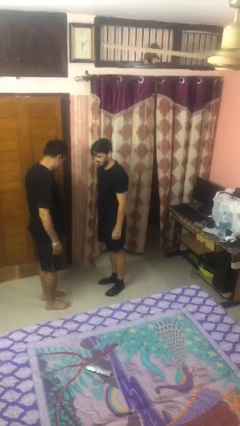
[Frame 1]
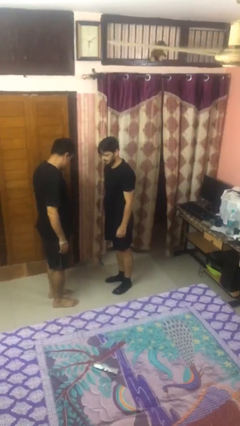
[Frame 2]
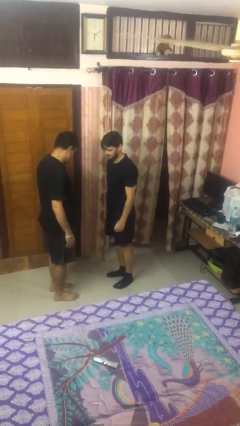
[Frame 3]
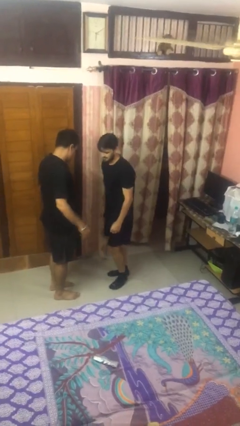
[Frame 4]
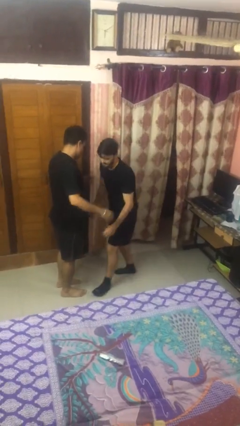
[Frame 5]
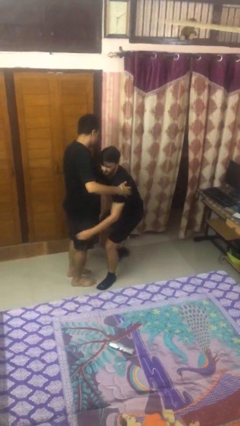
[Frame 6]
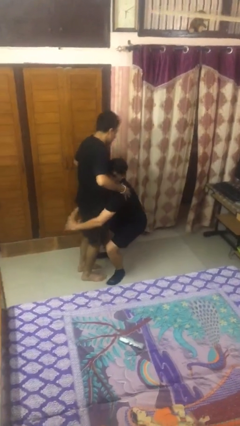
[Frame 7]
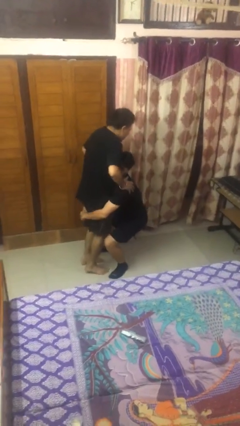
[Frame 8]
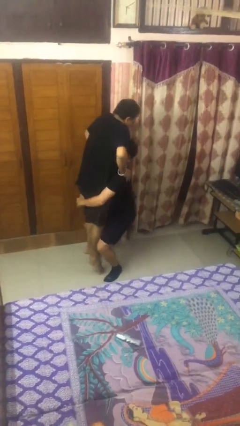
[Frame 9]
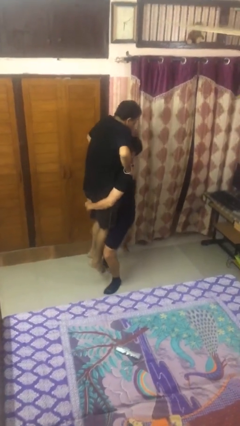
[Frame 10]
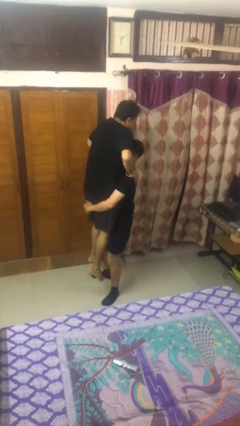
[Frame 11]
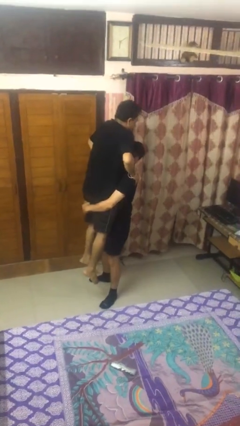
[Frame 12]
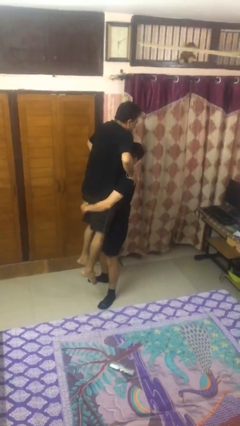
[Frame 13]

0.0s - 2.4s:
person picks up person

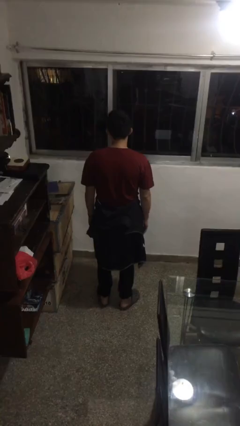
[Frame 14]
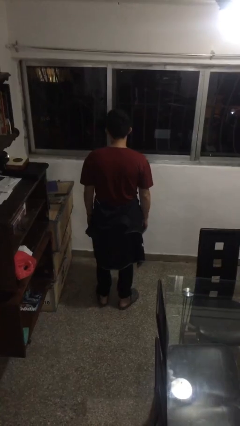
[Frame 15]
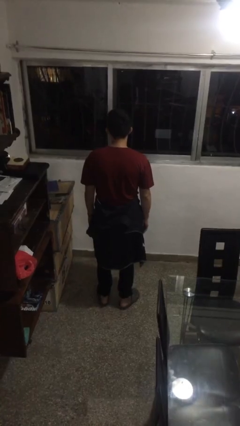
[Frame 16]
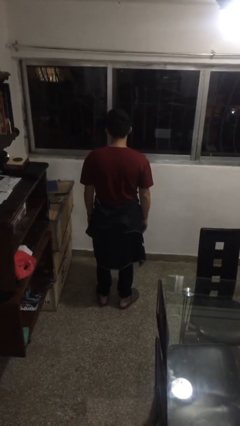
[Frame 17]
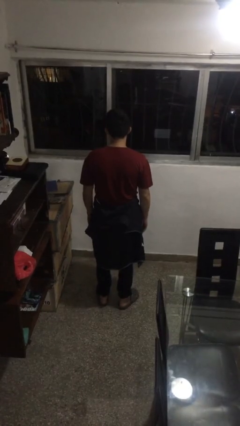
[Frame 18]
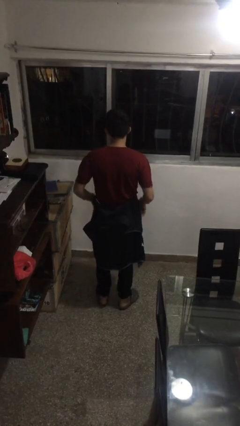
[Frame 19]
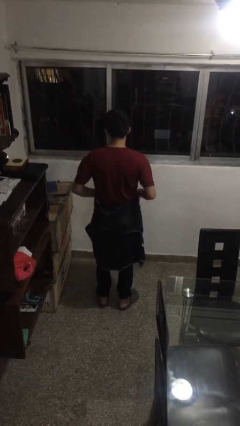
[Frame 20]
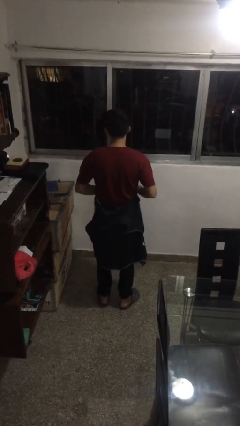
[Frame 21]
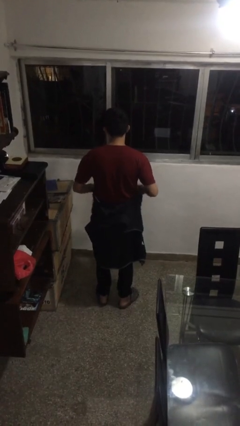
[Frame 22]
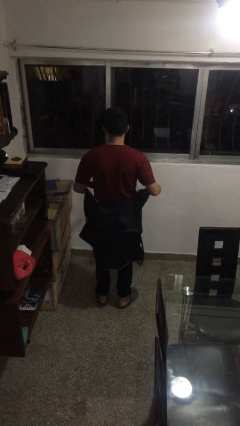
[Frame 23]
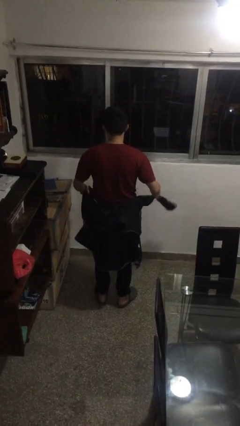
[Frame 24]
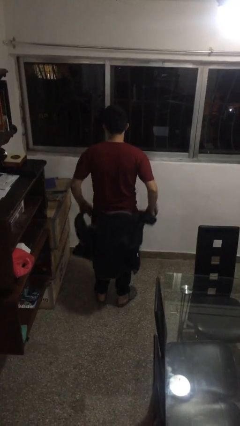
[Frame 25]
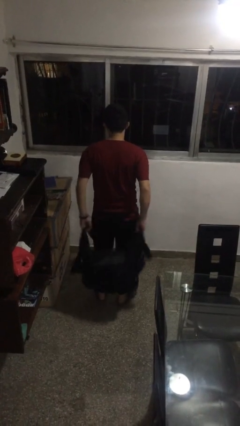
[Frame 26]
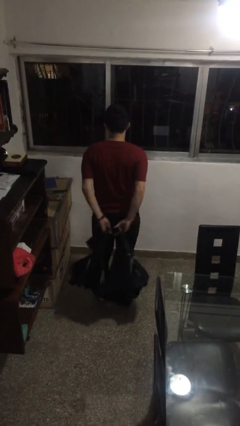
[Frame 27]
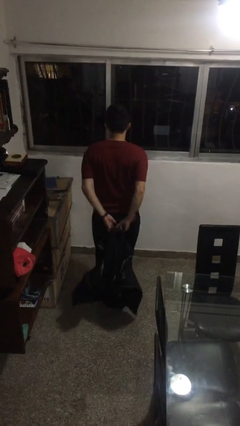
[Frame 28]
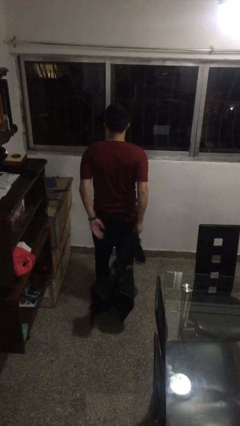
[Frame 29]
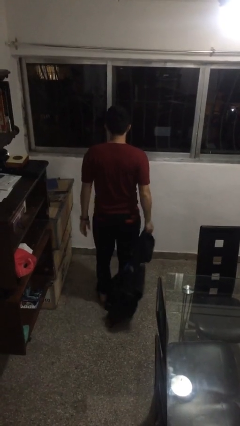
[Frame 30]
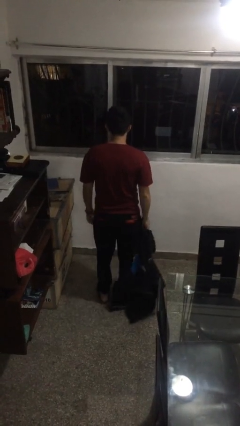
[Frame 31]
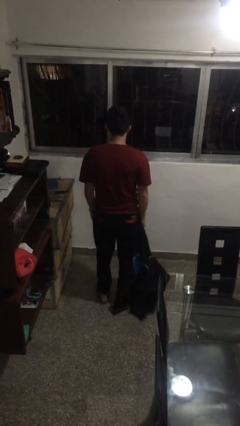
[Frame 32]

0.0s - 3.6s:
person unties jacket around waist

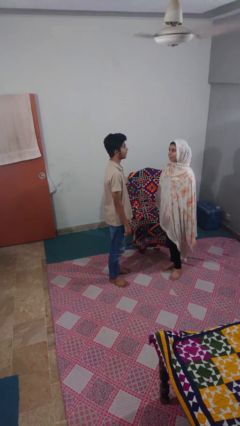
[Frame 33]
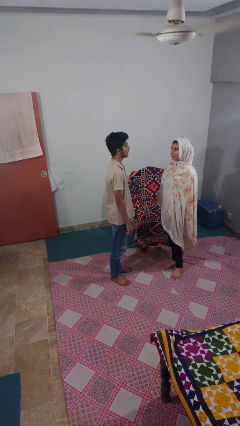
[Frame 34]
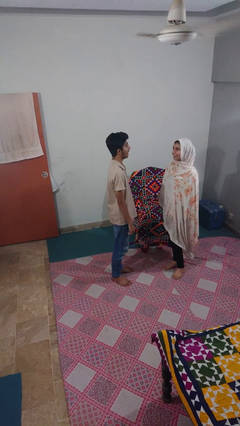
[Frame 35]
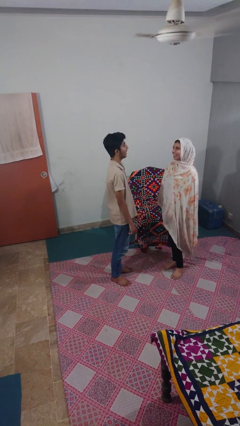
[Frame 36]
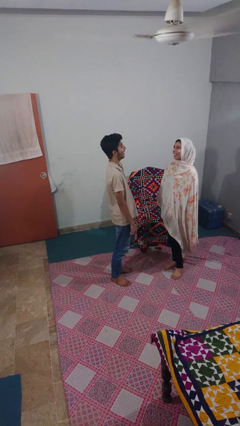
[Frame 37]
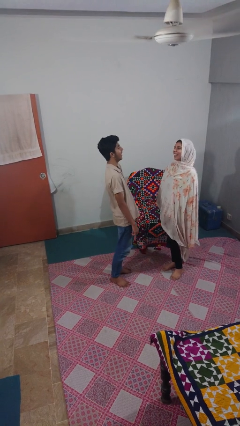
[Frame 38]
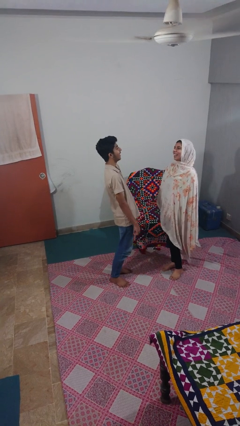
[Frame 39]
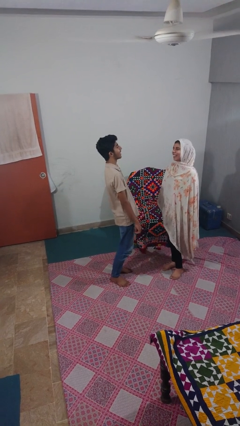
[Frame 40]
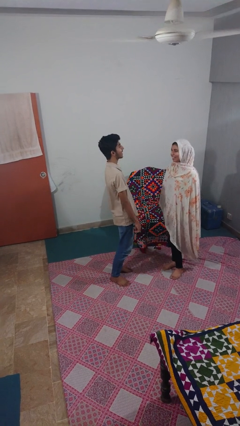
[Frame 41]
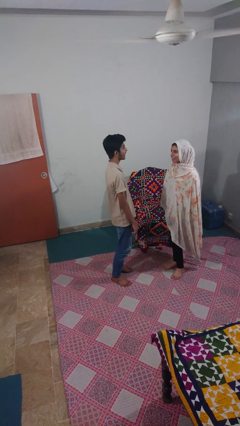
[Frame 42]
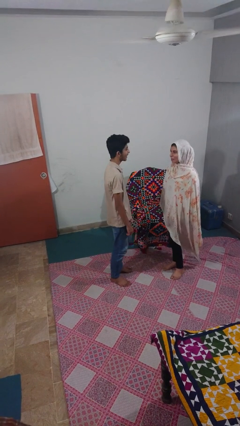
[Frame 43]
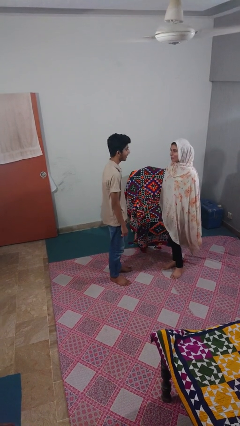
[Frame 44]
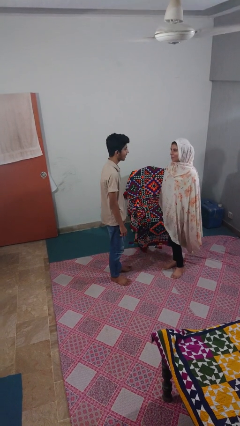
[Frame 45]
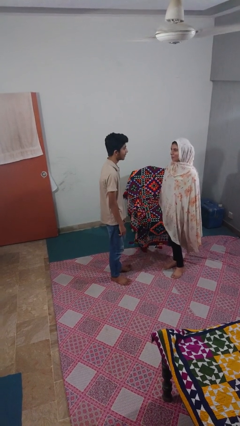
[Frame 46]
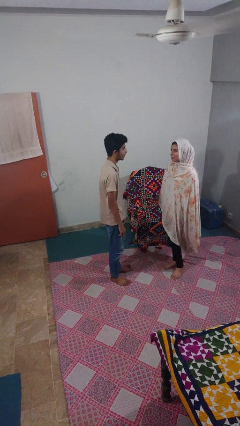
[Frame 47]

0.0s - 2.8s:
person laughs with person

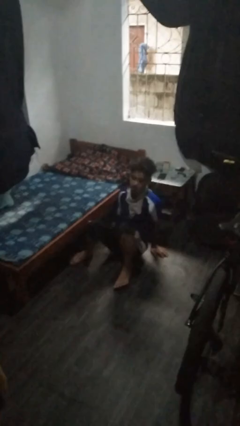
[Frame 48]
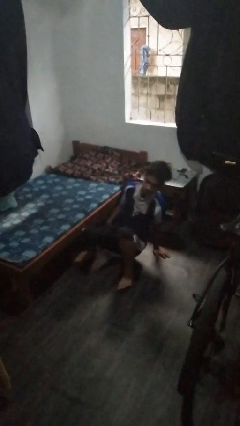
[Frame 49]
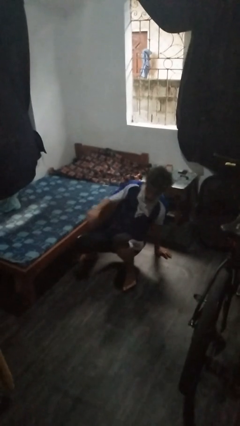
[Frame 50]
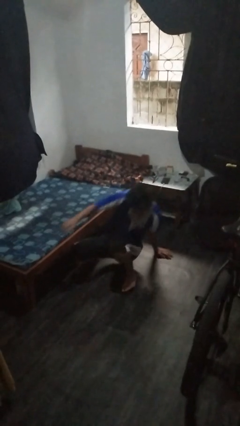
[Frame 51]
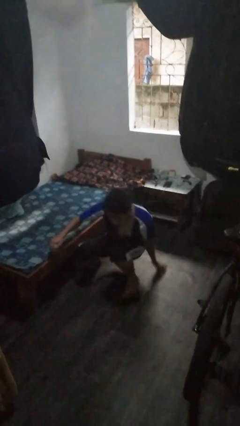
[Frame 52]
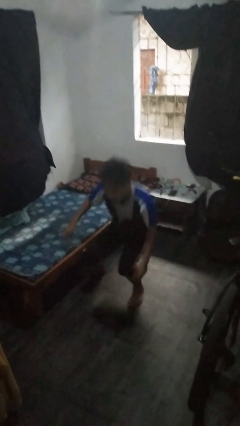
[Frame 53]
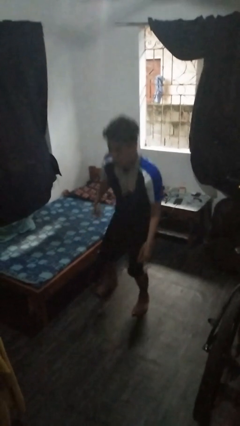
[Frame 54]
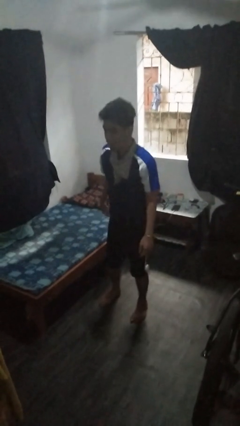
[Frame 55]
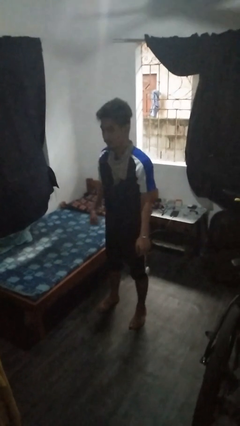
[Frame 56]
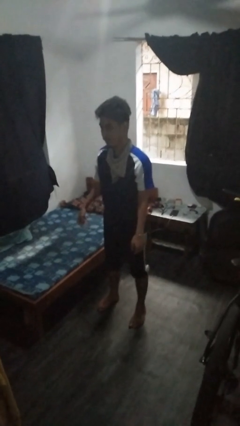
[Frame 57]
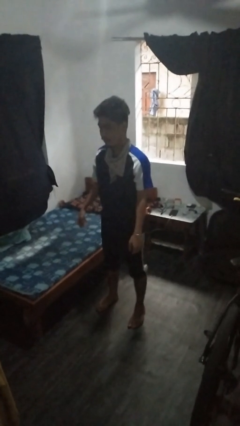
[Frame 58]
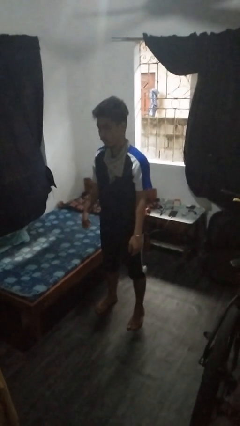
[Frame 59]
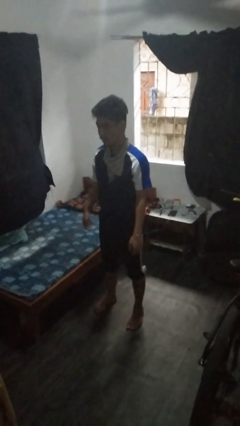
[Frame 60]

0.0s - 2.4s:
person stands up from floor

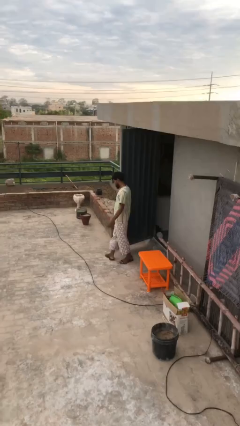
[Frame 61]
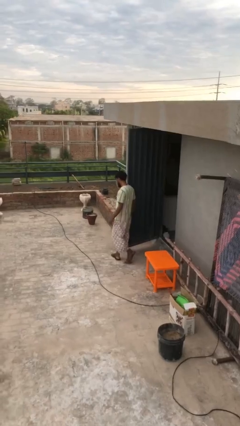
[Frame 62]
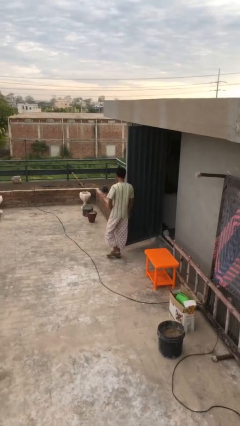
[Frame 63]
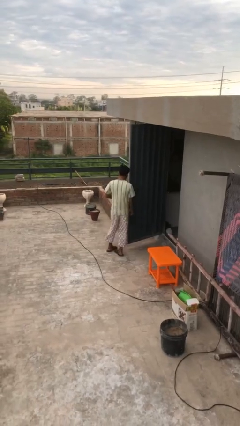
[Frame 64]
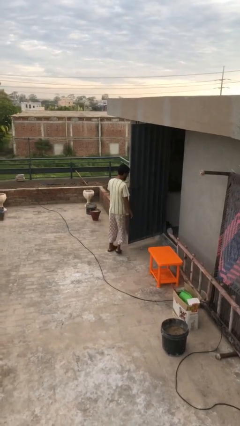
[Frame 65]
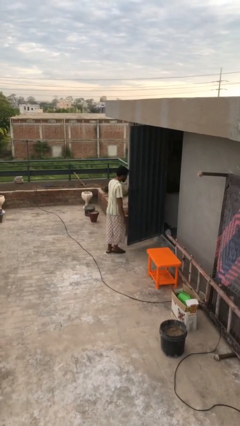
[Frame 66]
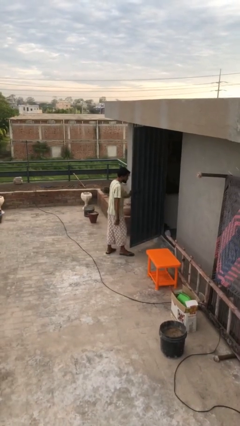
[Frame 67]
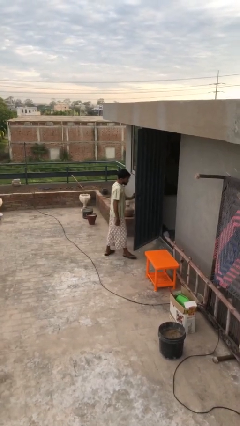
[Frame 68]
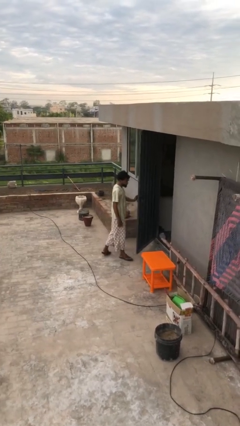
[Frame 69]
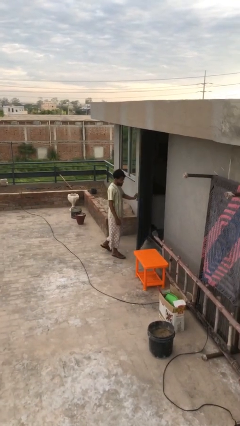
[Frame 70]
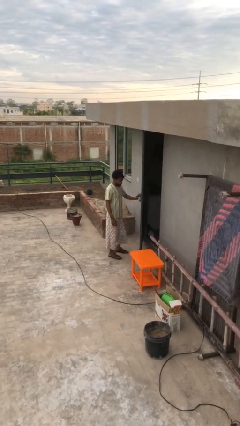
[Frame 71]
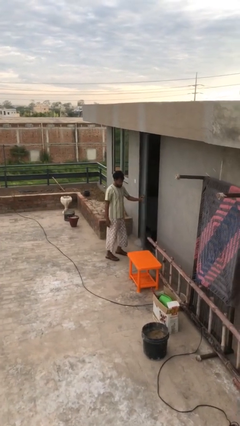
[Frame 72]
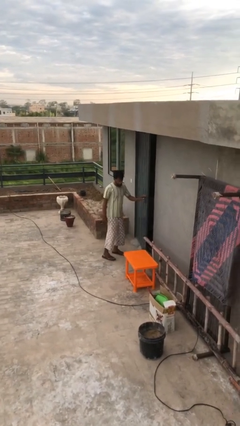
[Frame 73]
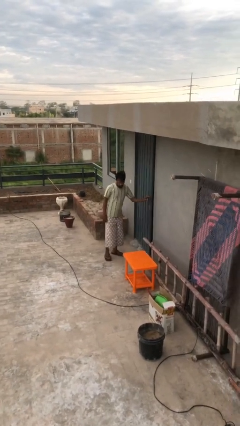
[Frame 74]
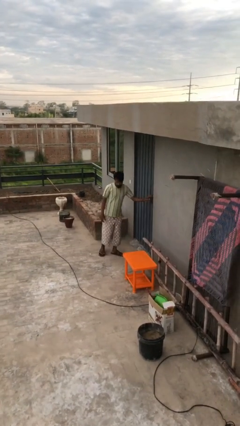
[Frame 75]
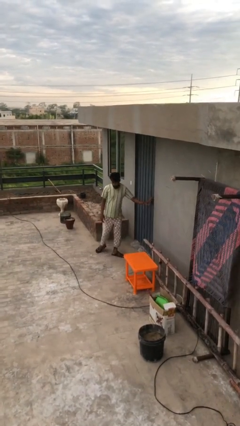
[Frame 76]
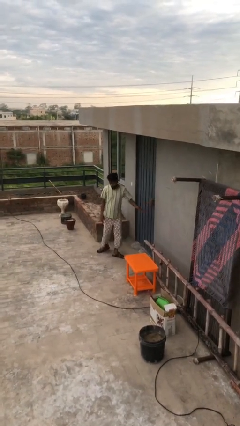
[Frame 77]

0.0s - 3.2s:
person closes facility door

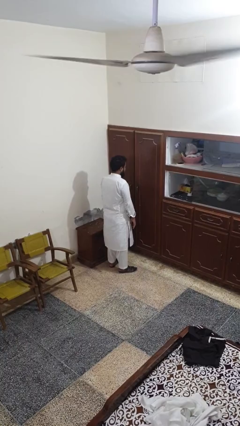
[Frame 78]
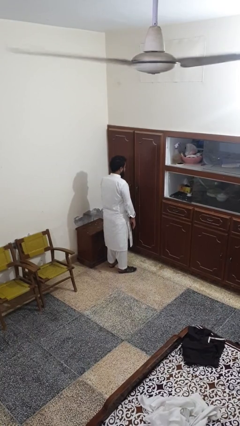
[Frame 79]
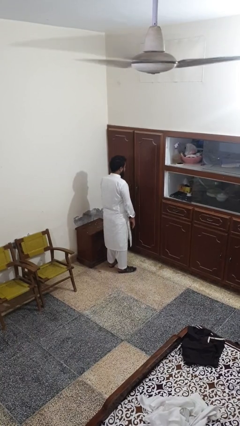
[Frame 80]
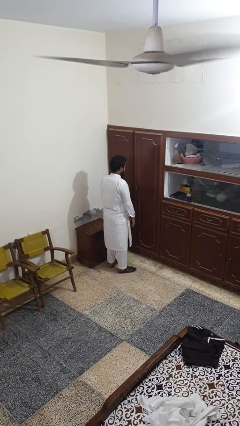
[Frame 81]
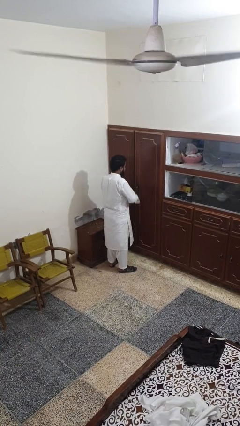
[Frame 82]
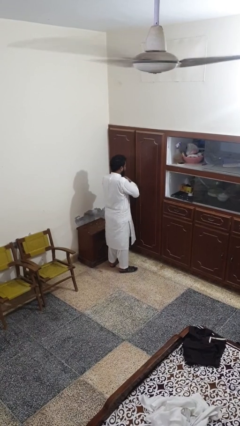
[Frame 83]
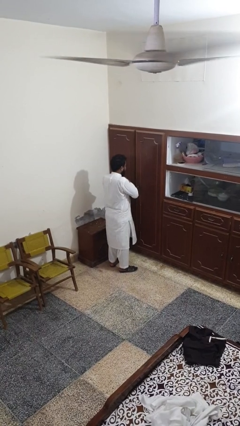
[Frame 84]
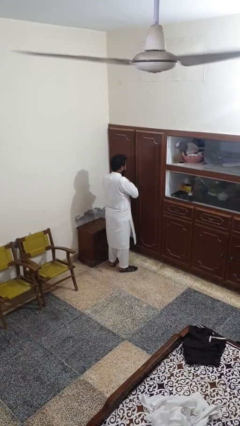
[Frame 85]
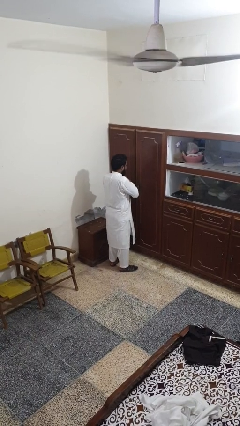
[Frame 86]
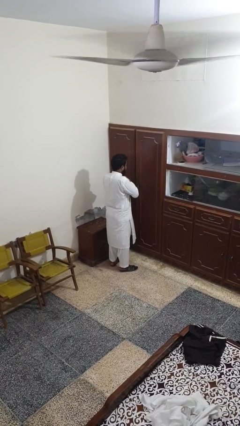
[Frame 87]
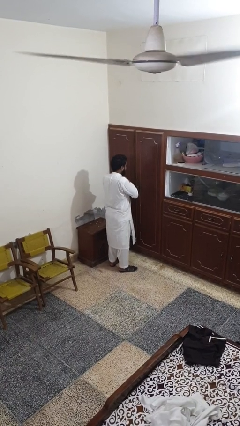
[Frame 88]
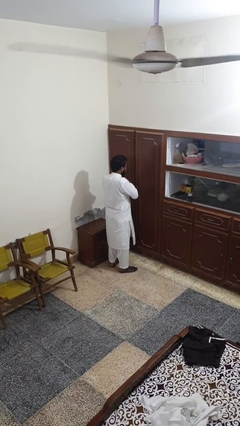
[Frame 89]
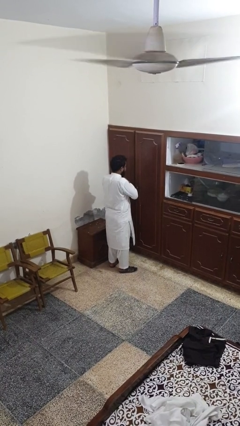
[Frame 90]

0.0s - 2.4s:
person prays

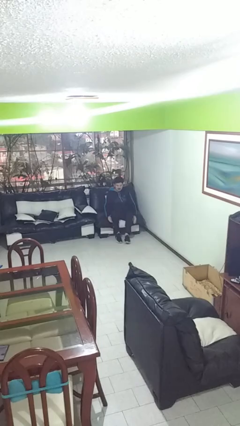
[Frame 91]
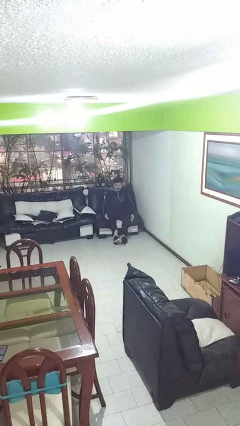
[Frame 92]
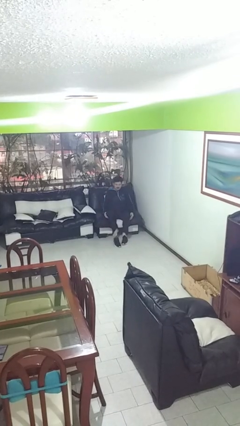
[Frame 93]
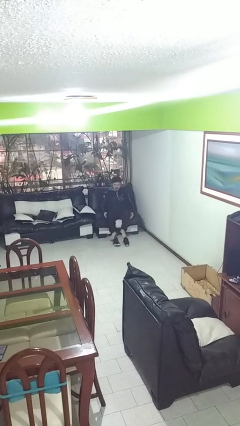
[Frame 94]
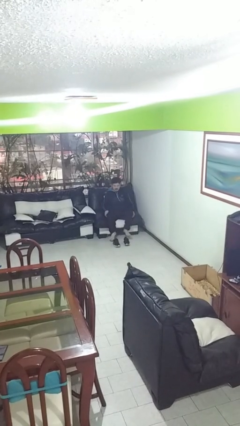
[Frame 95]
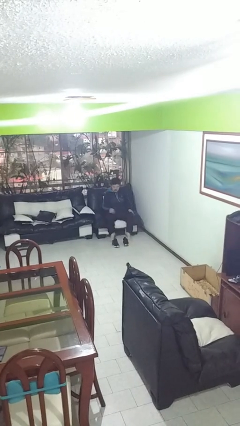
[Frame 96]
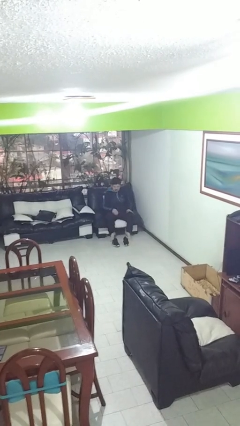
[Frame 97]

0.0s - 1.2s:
person takes off shoes
